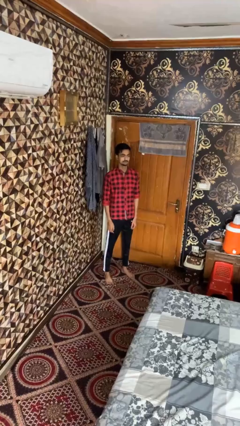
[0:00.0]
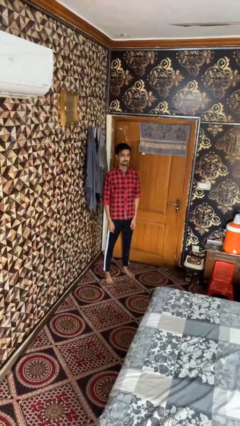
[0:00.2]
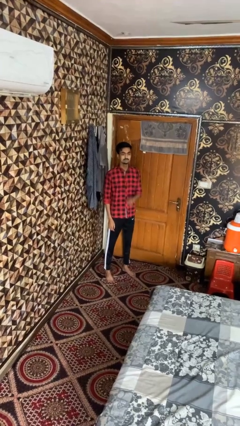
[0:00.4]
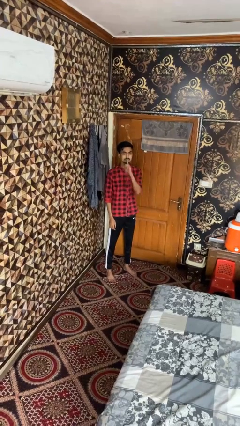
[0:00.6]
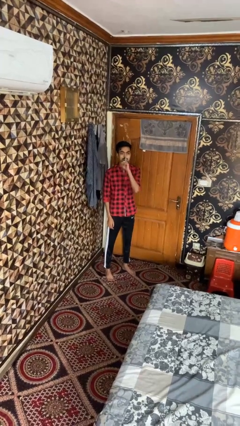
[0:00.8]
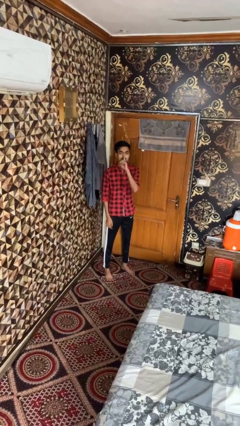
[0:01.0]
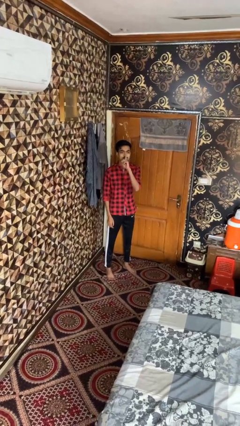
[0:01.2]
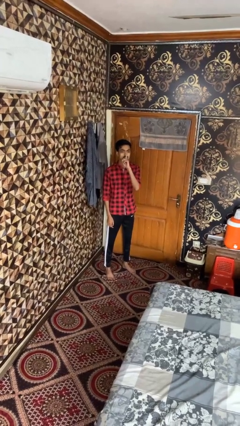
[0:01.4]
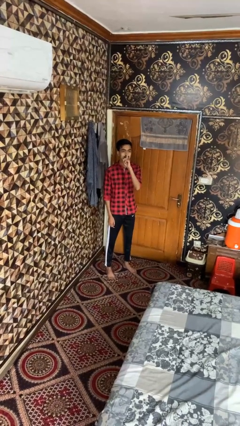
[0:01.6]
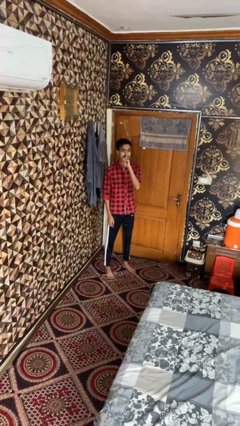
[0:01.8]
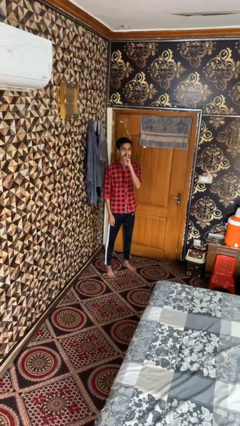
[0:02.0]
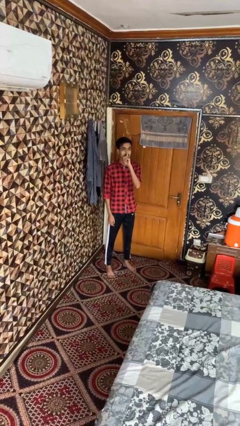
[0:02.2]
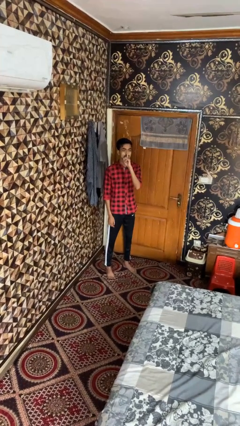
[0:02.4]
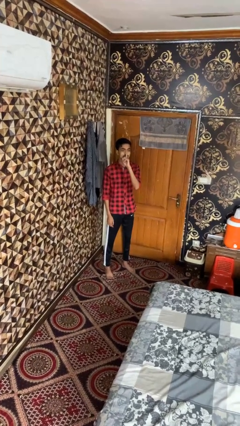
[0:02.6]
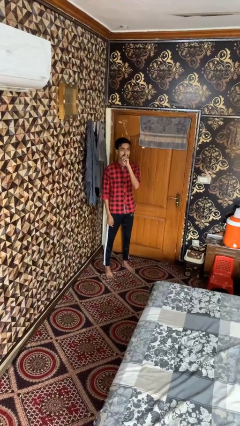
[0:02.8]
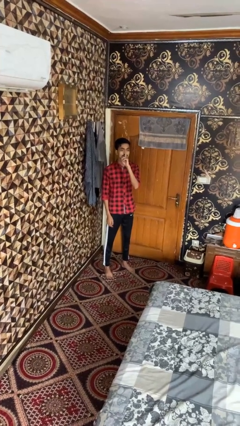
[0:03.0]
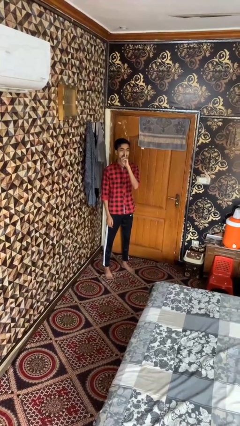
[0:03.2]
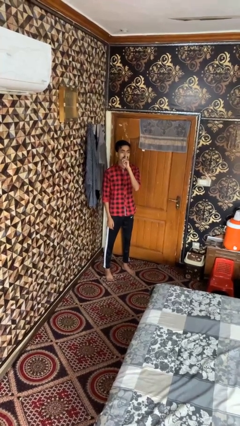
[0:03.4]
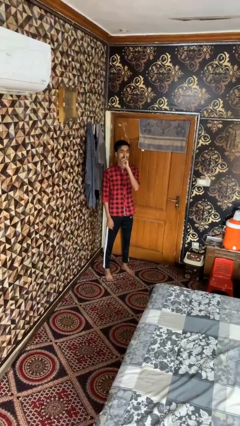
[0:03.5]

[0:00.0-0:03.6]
person gestures be quiet

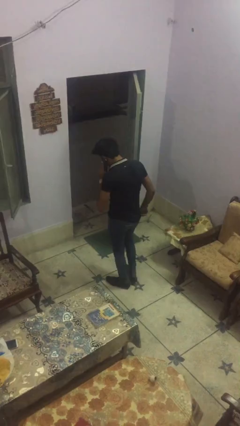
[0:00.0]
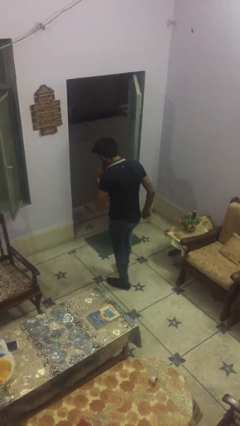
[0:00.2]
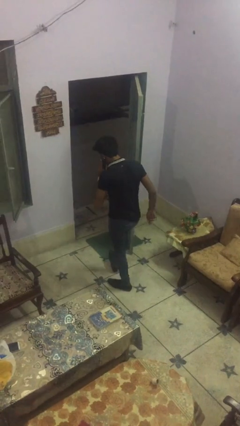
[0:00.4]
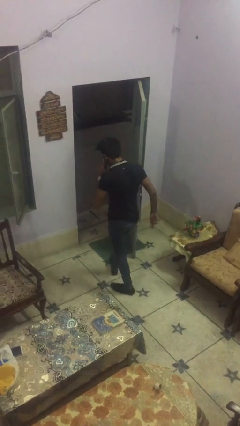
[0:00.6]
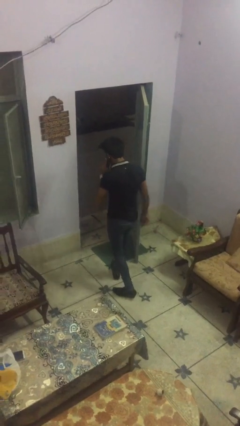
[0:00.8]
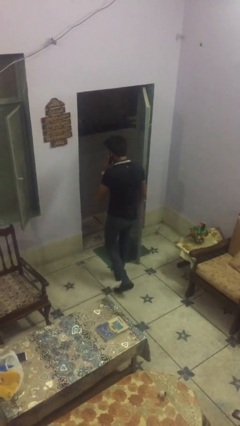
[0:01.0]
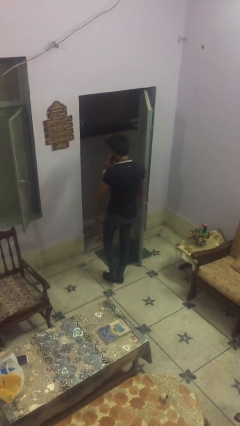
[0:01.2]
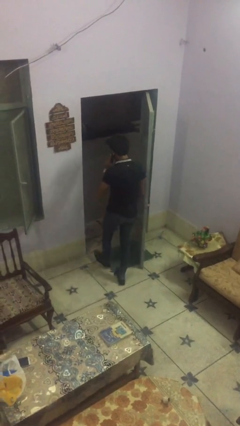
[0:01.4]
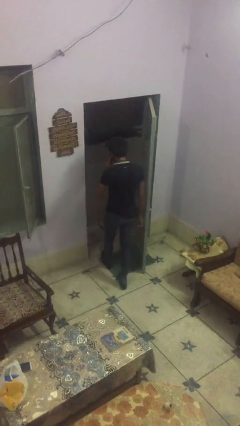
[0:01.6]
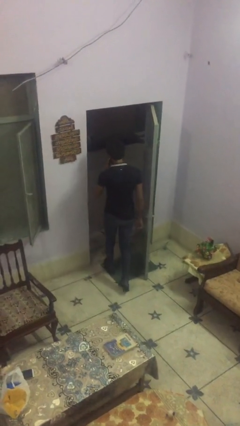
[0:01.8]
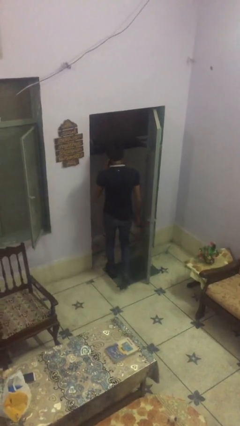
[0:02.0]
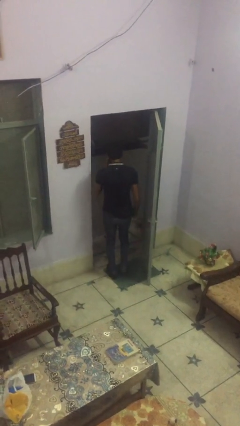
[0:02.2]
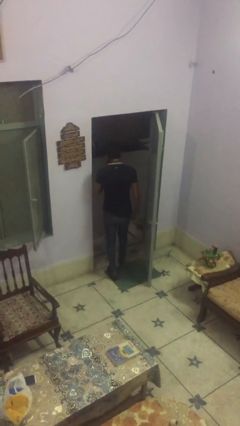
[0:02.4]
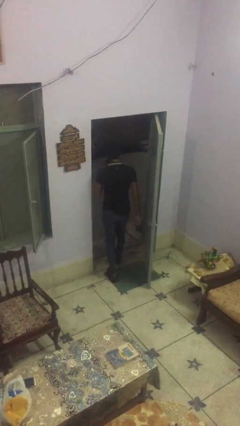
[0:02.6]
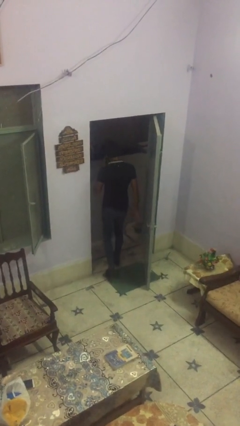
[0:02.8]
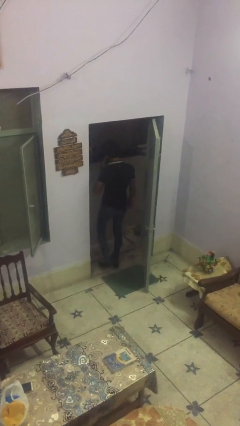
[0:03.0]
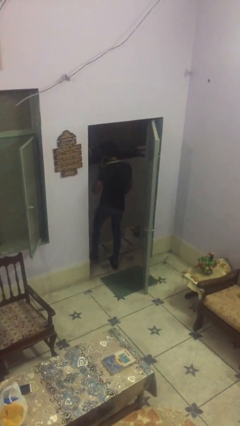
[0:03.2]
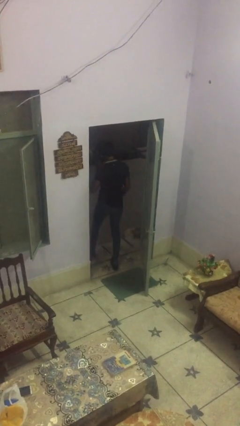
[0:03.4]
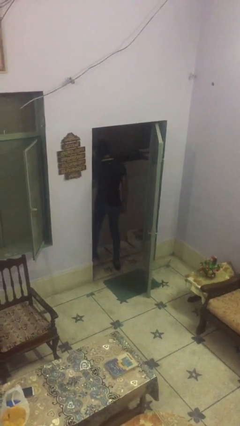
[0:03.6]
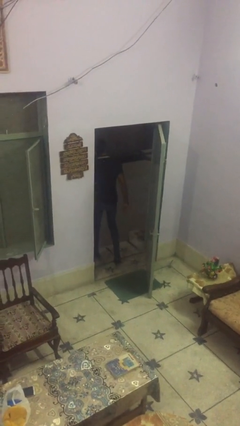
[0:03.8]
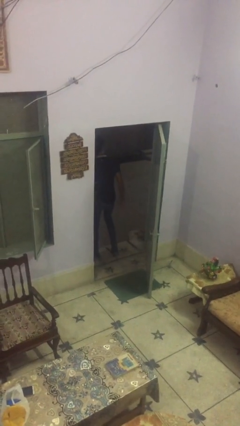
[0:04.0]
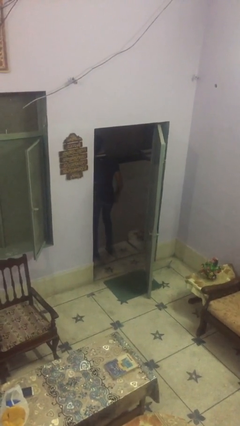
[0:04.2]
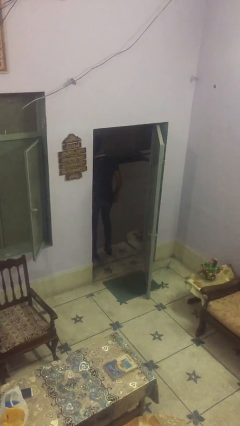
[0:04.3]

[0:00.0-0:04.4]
person exits scene through structure

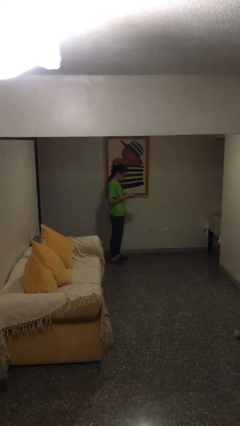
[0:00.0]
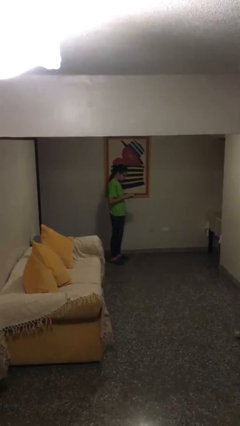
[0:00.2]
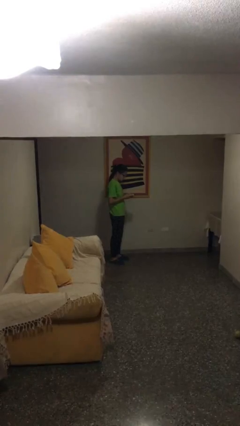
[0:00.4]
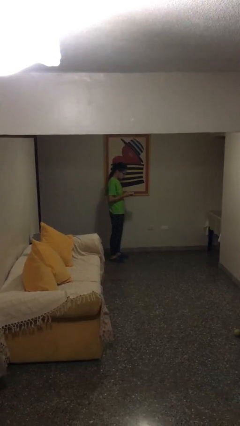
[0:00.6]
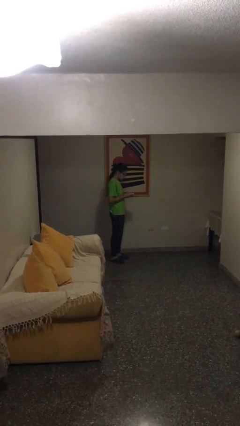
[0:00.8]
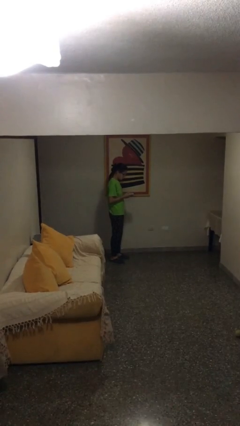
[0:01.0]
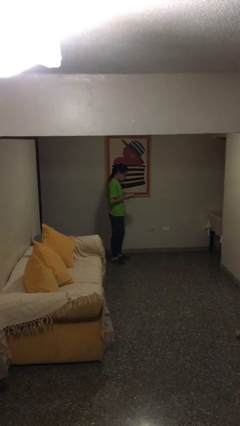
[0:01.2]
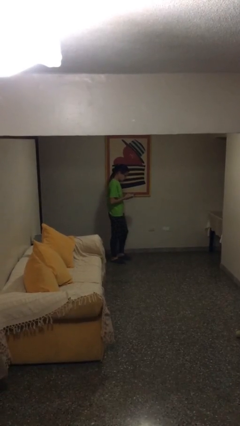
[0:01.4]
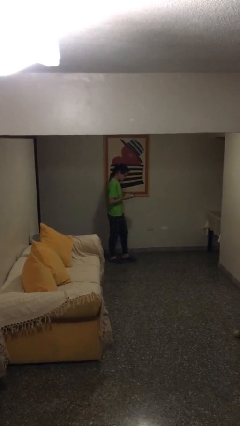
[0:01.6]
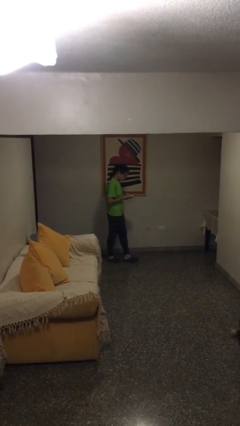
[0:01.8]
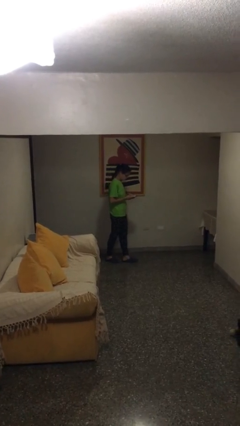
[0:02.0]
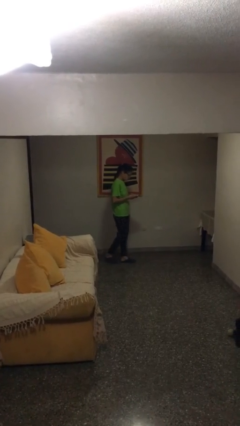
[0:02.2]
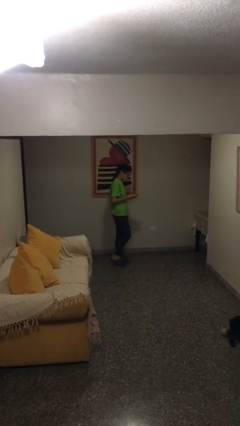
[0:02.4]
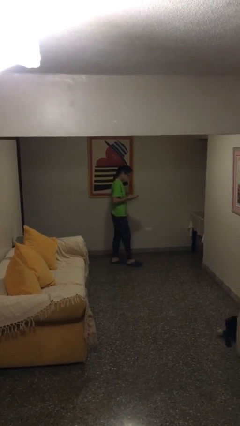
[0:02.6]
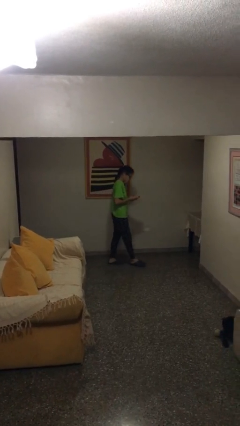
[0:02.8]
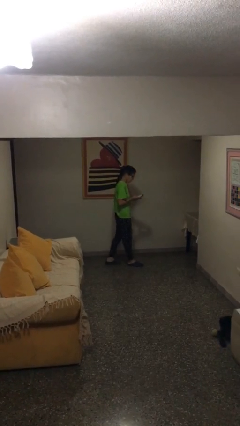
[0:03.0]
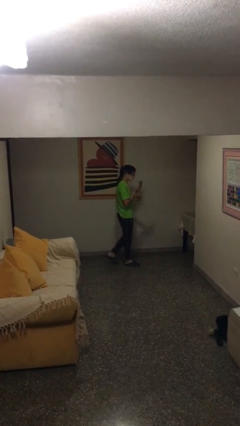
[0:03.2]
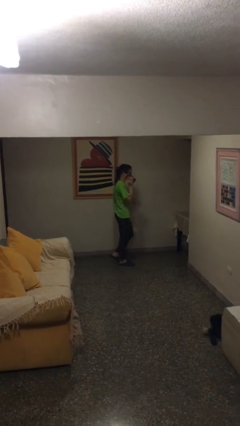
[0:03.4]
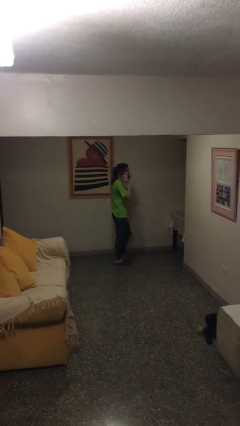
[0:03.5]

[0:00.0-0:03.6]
person texts on phone

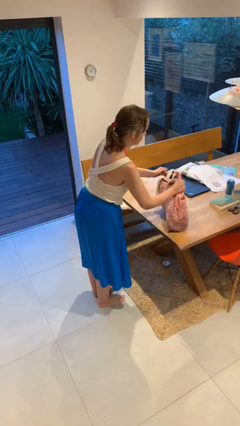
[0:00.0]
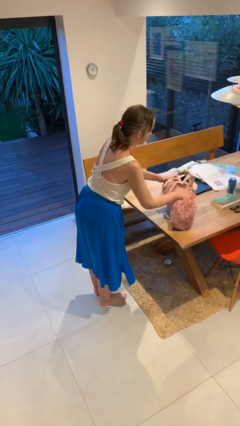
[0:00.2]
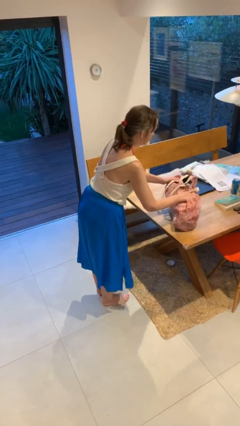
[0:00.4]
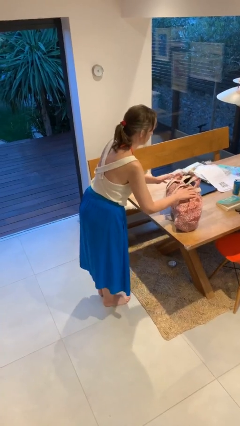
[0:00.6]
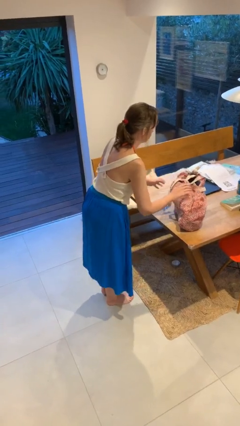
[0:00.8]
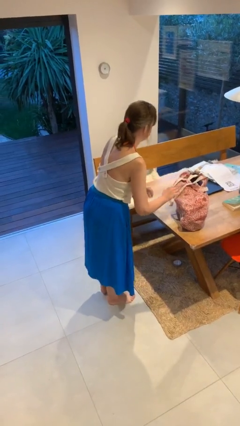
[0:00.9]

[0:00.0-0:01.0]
person puts down object on table

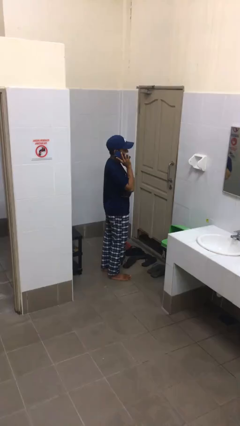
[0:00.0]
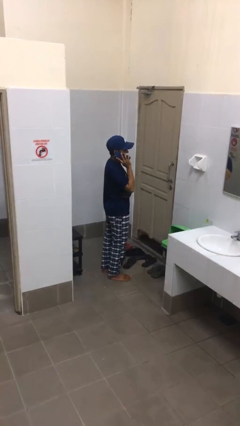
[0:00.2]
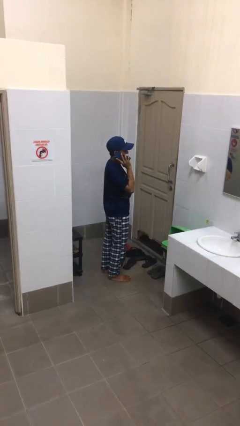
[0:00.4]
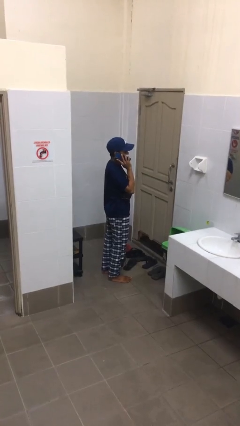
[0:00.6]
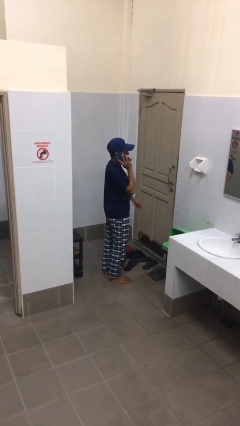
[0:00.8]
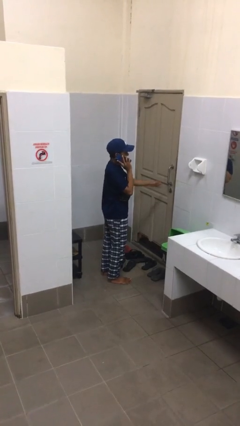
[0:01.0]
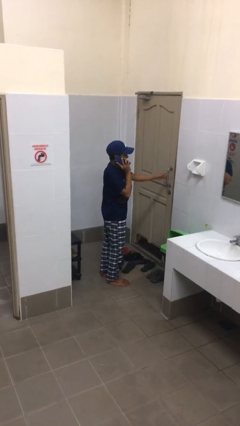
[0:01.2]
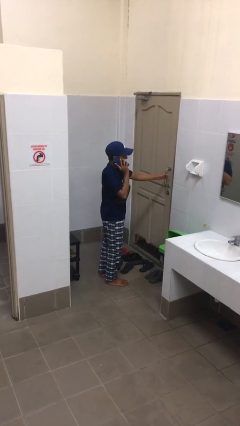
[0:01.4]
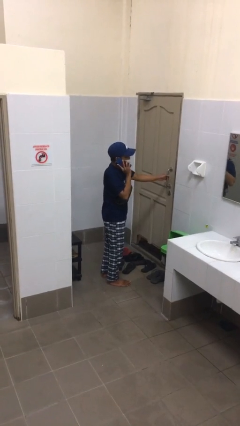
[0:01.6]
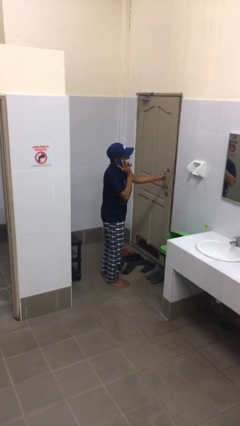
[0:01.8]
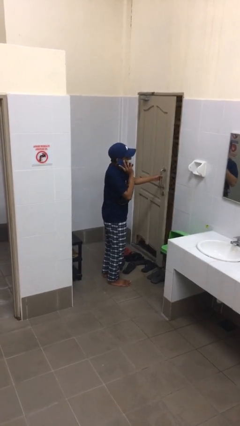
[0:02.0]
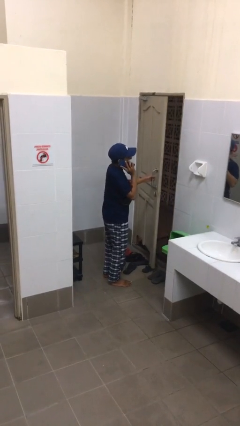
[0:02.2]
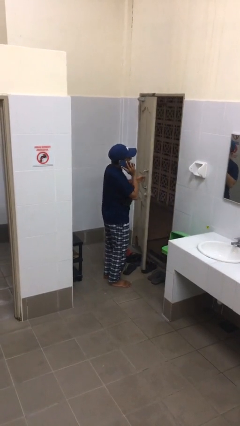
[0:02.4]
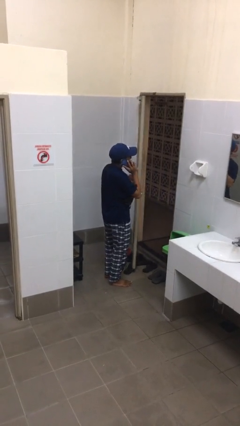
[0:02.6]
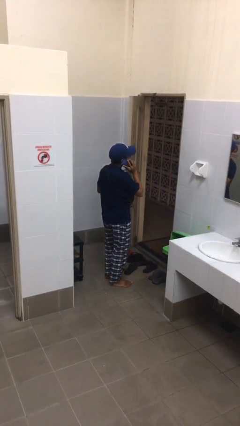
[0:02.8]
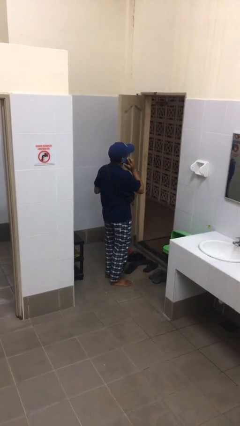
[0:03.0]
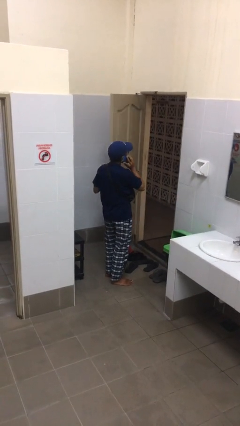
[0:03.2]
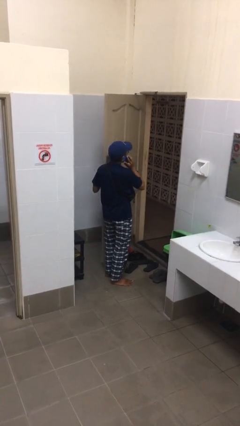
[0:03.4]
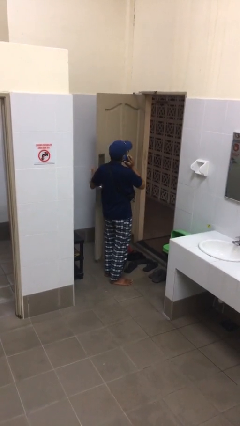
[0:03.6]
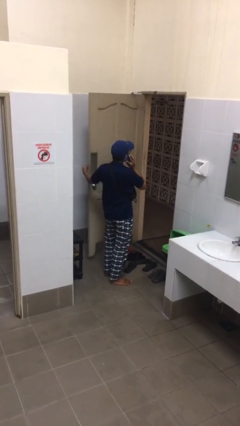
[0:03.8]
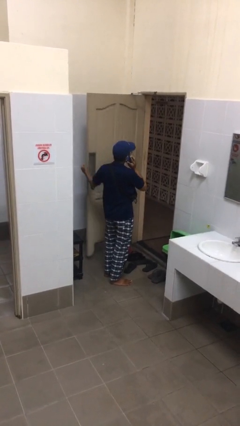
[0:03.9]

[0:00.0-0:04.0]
person opens facility door

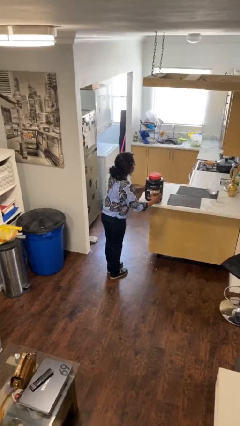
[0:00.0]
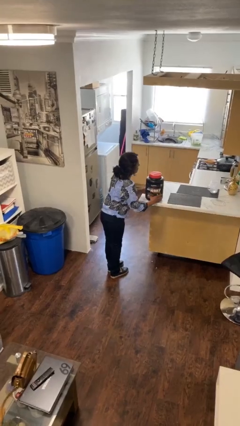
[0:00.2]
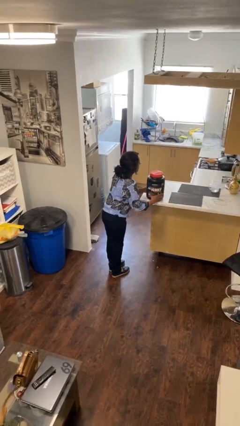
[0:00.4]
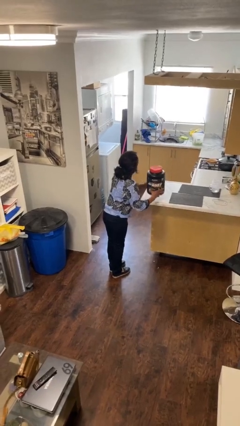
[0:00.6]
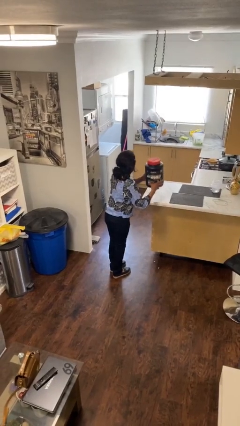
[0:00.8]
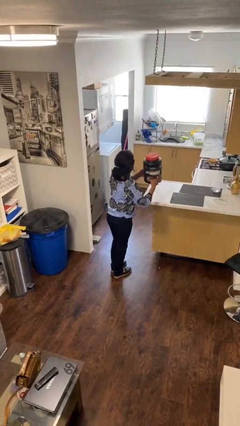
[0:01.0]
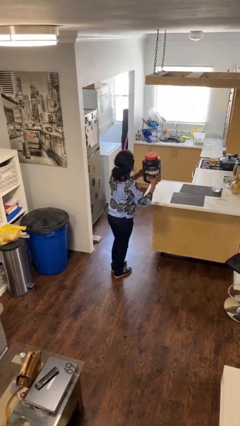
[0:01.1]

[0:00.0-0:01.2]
person picks up object from shelf
